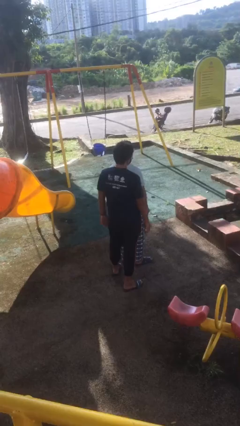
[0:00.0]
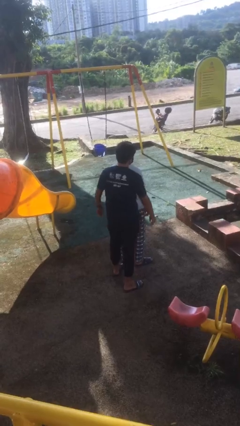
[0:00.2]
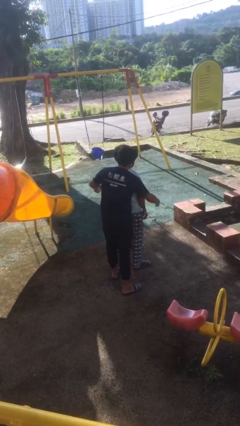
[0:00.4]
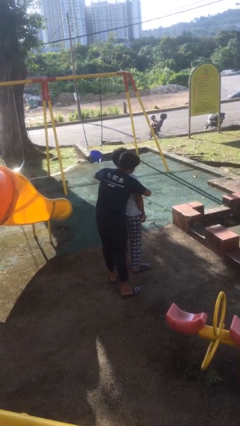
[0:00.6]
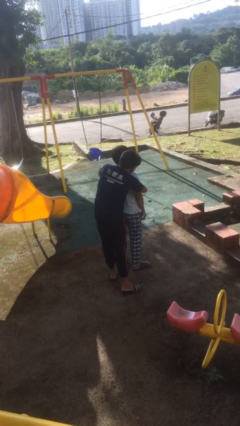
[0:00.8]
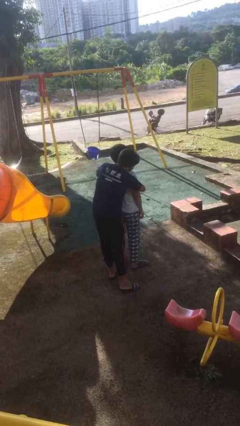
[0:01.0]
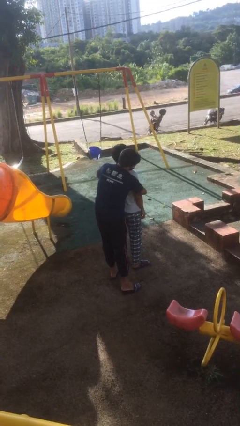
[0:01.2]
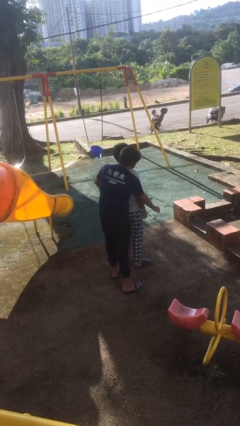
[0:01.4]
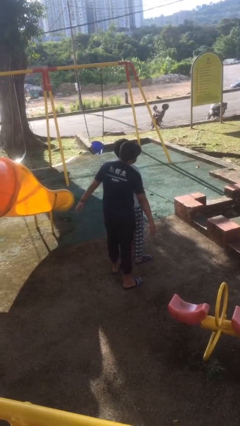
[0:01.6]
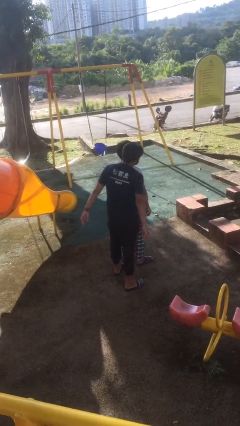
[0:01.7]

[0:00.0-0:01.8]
person hugs person from behind

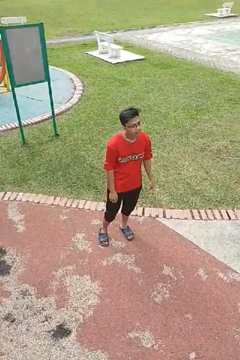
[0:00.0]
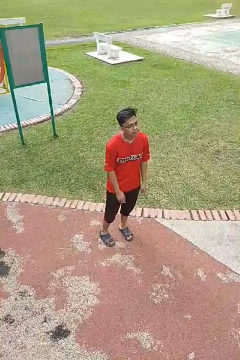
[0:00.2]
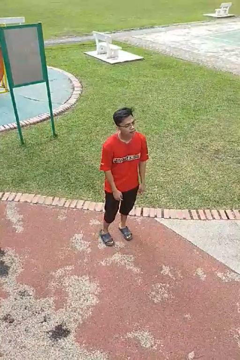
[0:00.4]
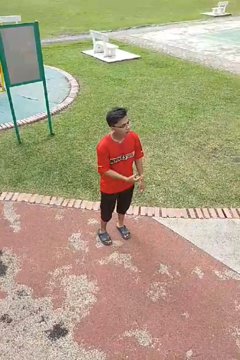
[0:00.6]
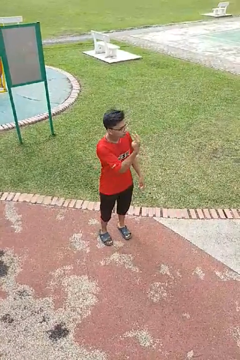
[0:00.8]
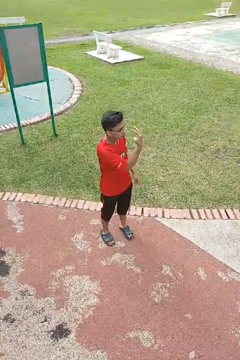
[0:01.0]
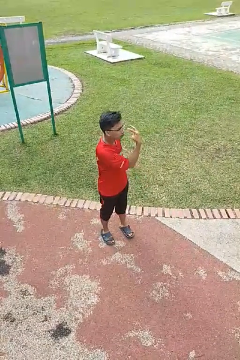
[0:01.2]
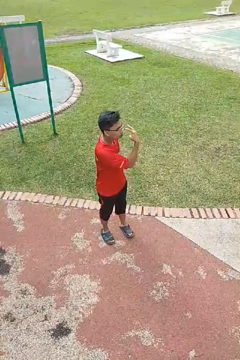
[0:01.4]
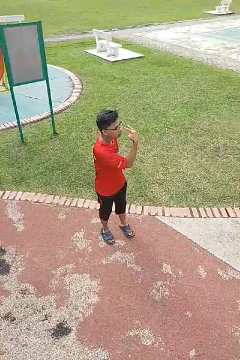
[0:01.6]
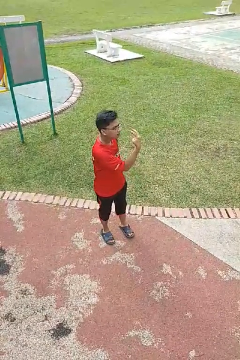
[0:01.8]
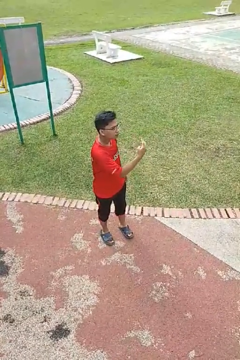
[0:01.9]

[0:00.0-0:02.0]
person gestures watch closely

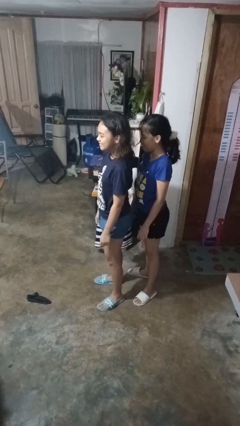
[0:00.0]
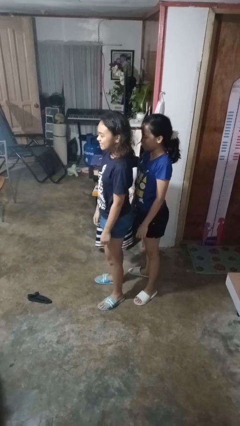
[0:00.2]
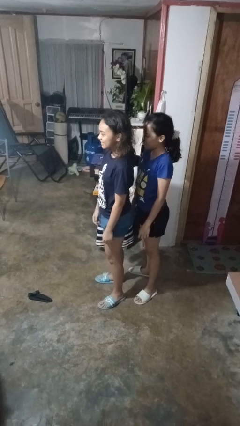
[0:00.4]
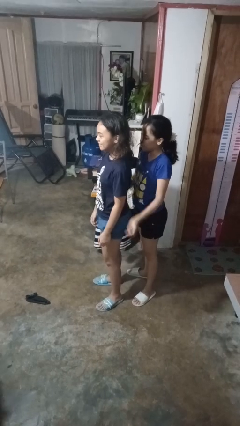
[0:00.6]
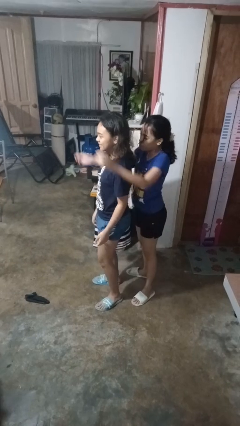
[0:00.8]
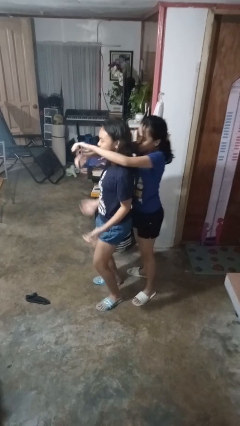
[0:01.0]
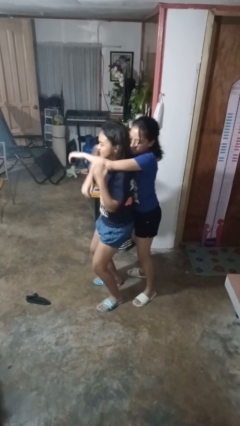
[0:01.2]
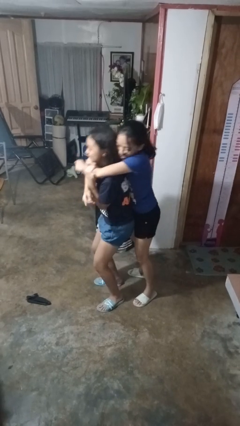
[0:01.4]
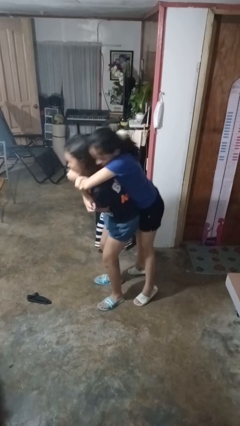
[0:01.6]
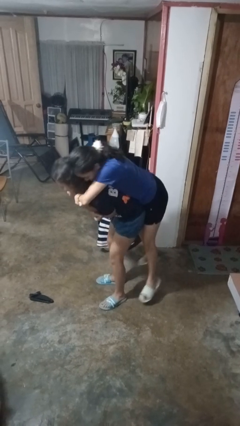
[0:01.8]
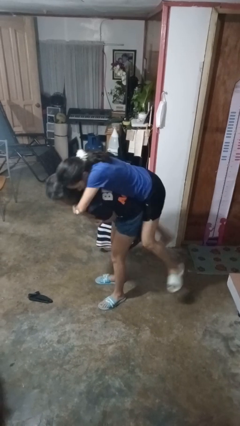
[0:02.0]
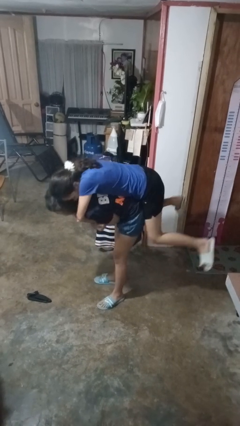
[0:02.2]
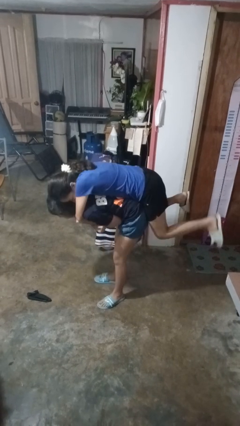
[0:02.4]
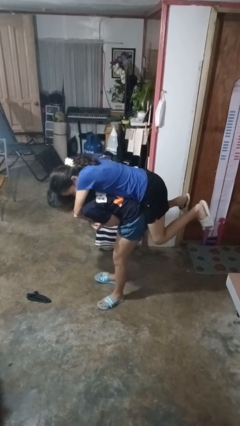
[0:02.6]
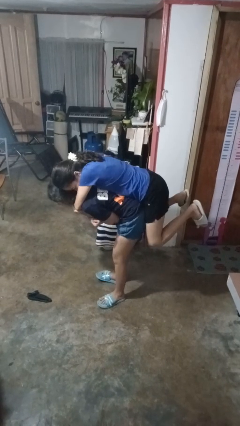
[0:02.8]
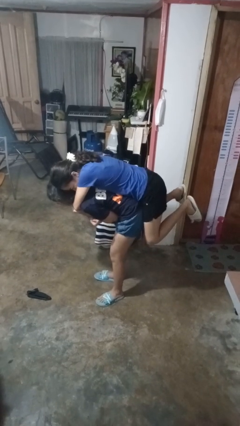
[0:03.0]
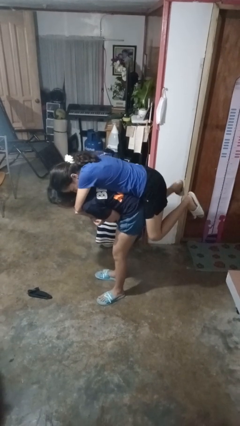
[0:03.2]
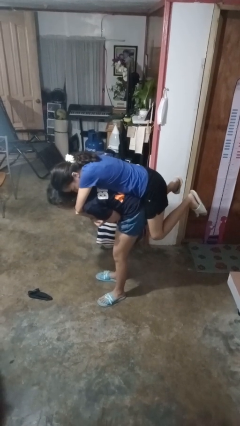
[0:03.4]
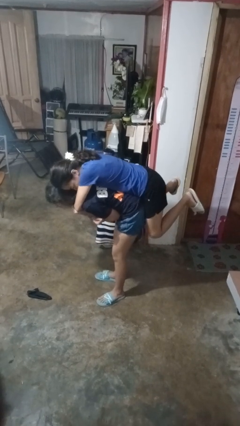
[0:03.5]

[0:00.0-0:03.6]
person picks up person

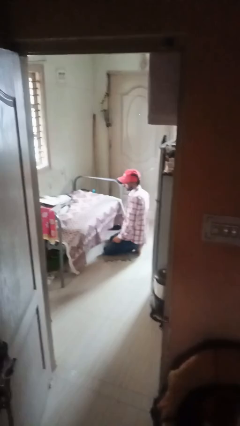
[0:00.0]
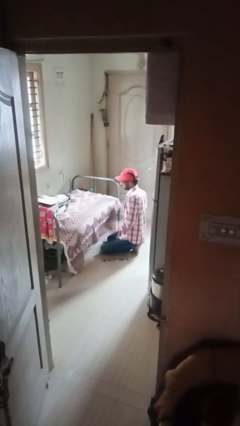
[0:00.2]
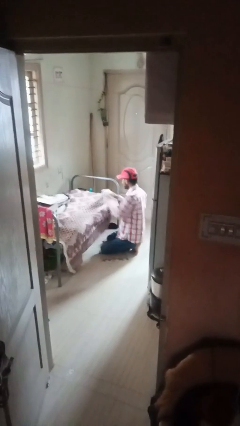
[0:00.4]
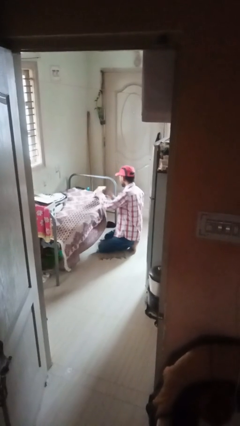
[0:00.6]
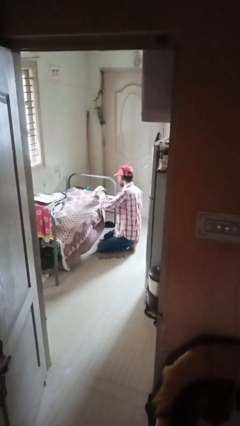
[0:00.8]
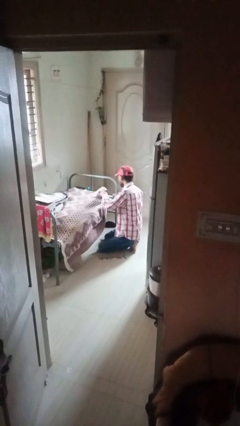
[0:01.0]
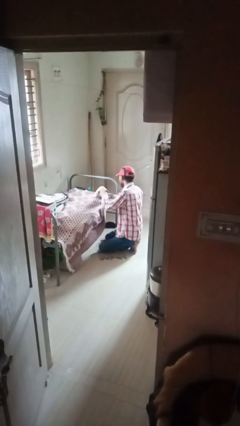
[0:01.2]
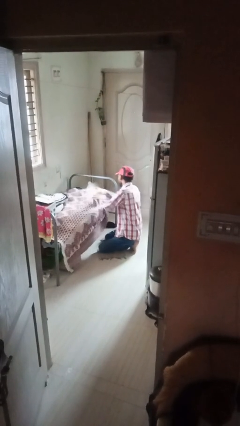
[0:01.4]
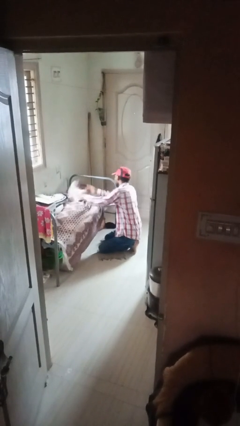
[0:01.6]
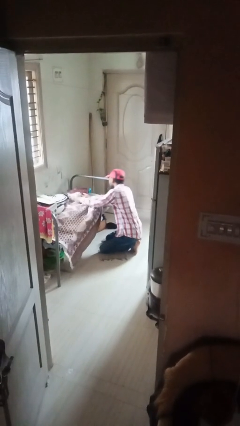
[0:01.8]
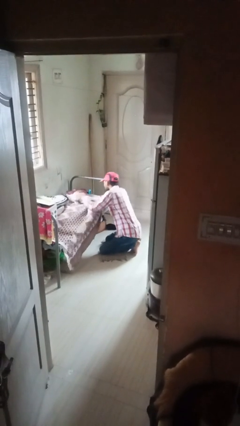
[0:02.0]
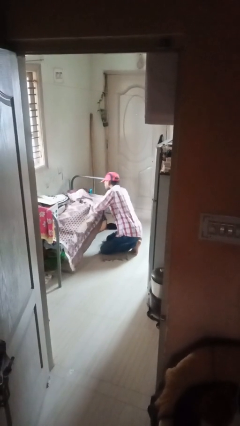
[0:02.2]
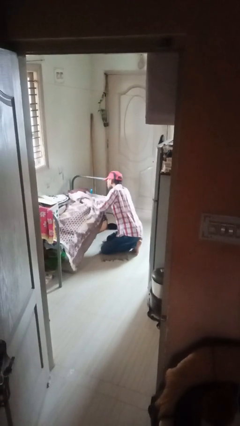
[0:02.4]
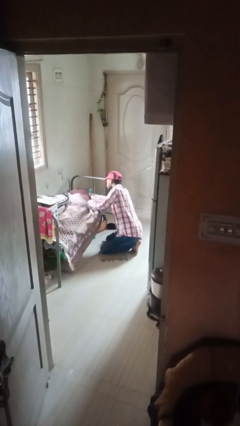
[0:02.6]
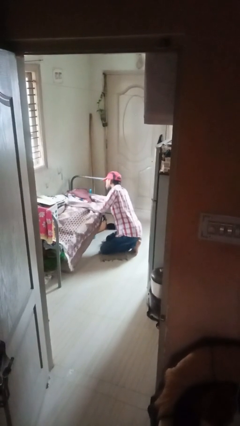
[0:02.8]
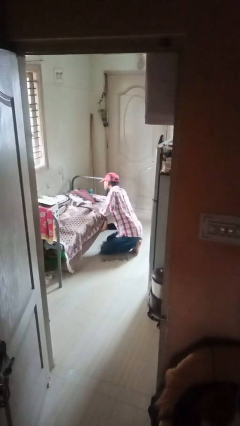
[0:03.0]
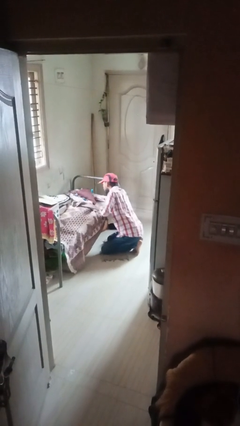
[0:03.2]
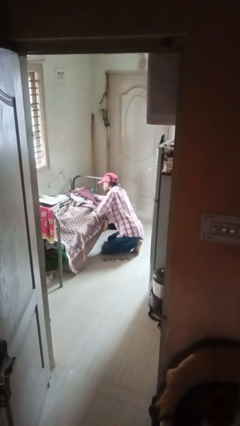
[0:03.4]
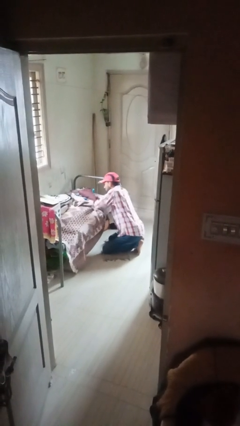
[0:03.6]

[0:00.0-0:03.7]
person searches under couch

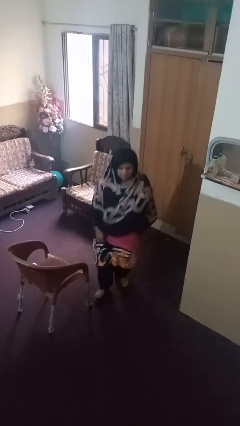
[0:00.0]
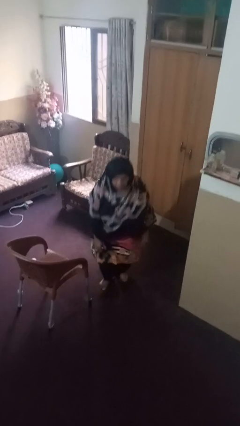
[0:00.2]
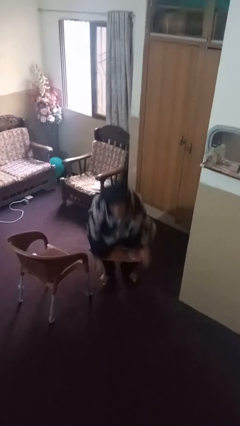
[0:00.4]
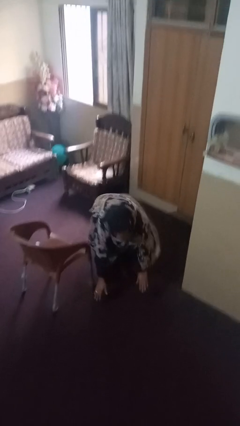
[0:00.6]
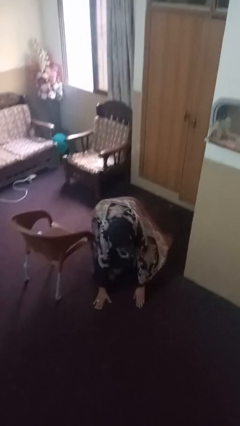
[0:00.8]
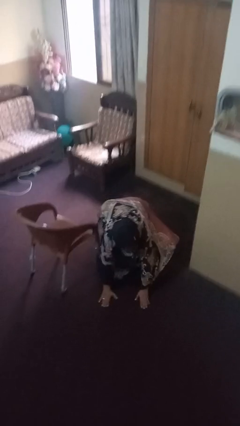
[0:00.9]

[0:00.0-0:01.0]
person lies down on floor

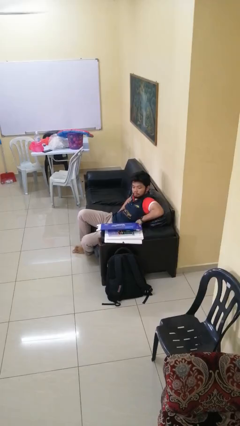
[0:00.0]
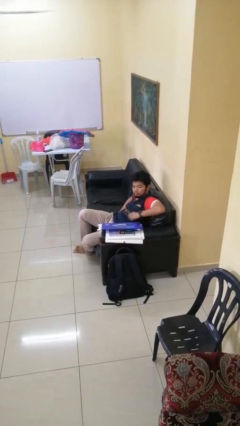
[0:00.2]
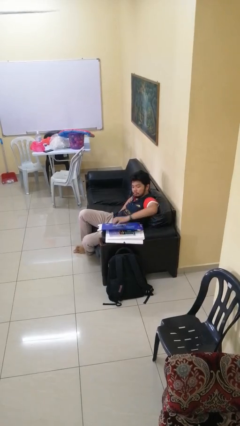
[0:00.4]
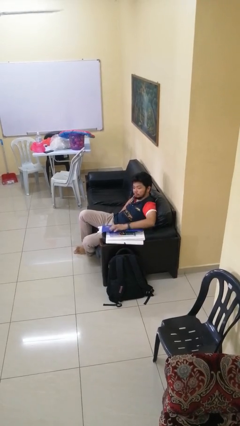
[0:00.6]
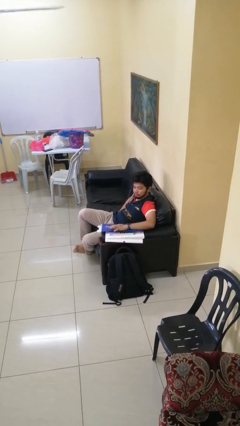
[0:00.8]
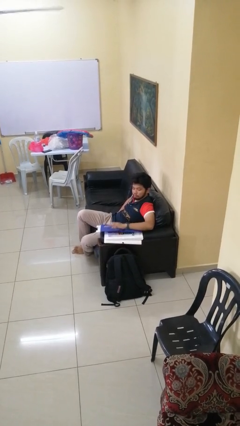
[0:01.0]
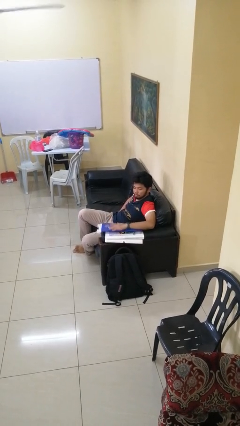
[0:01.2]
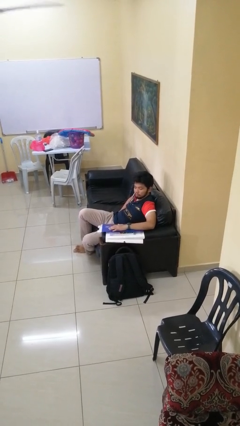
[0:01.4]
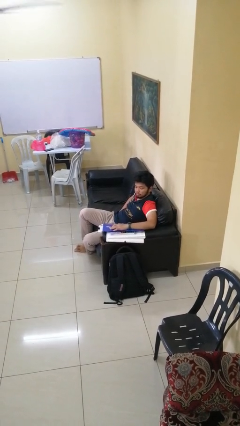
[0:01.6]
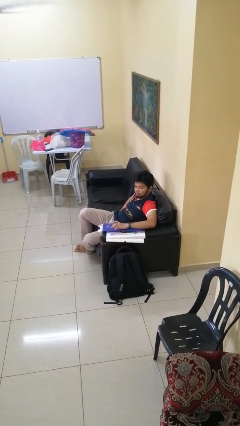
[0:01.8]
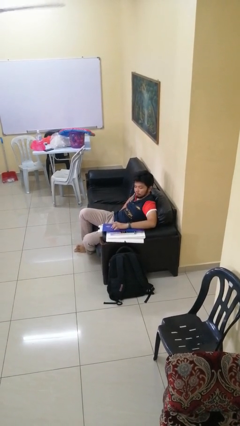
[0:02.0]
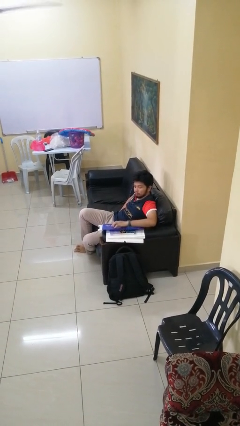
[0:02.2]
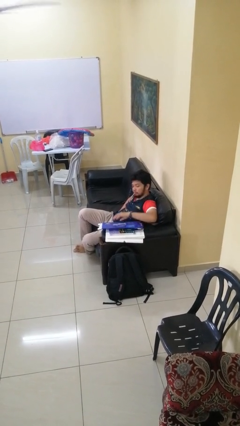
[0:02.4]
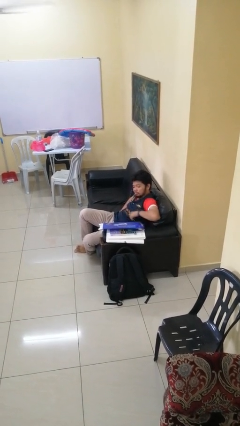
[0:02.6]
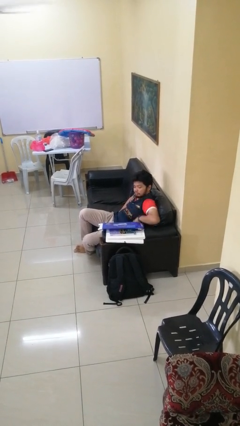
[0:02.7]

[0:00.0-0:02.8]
person taps object with finger

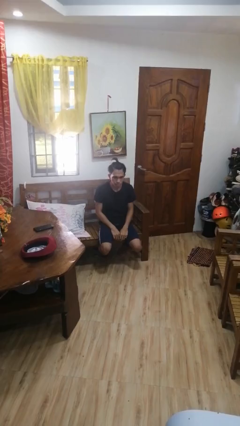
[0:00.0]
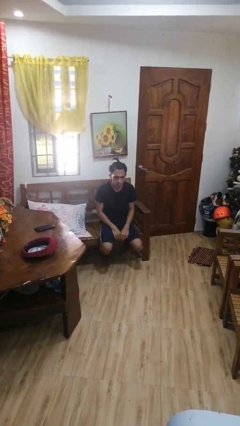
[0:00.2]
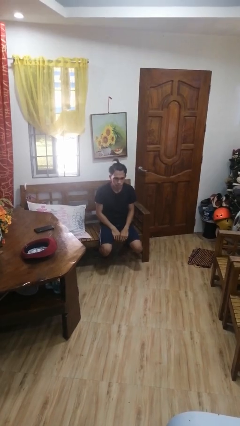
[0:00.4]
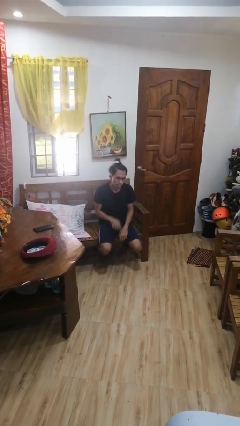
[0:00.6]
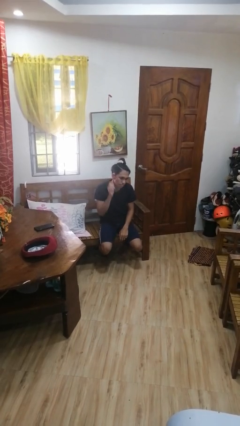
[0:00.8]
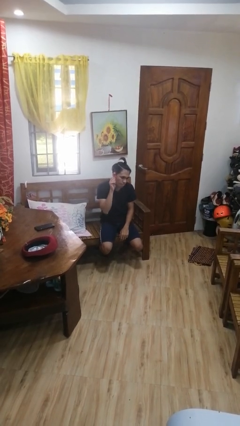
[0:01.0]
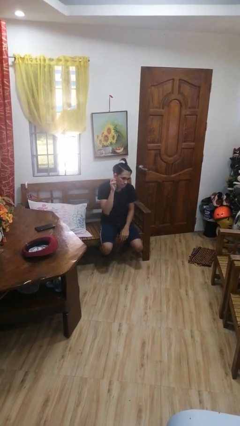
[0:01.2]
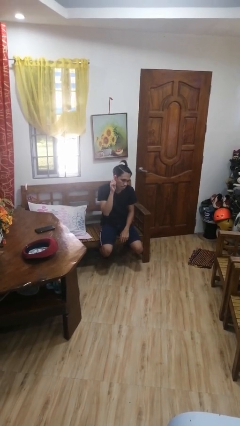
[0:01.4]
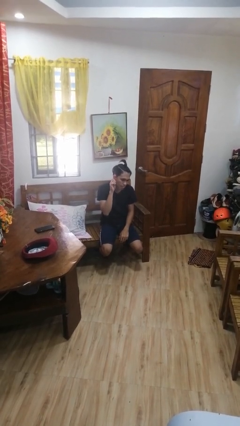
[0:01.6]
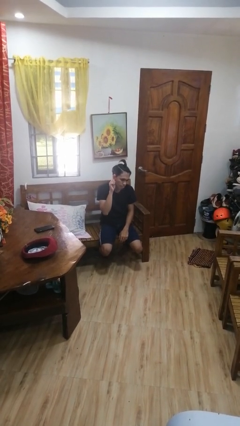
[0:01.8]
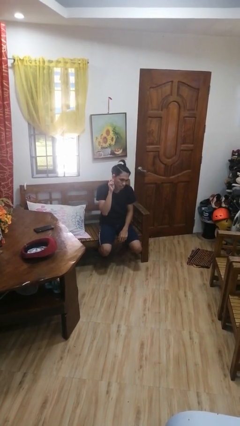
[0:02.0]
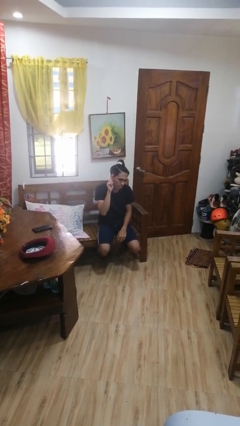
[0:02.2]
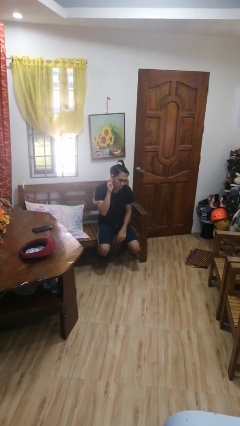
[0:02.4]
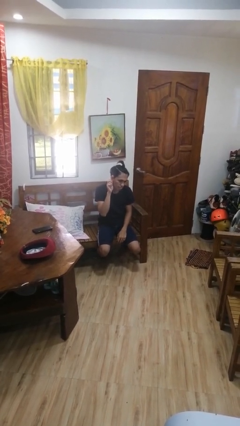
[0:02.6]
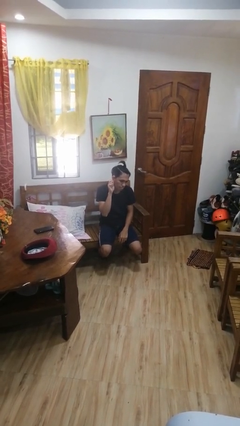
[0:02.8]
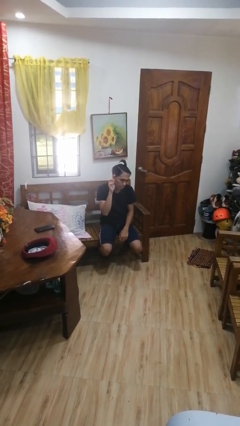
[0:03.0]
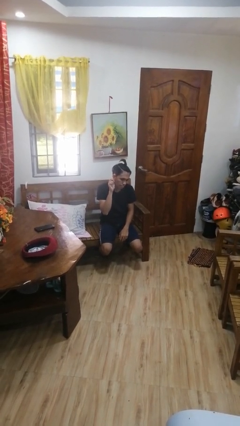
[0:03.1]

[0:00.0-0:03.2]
person touches earlobe
